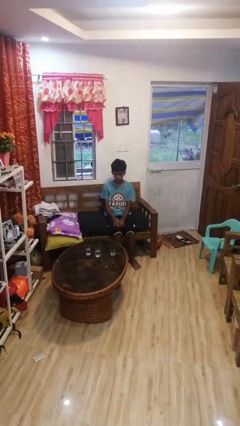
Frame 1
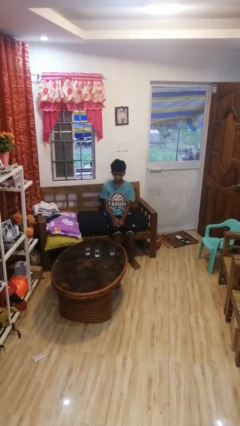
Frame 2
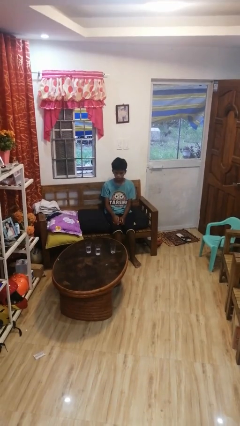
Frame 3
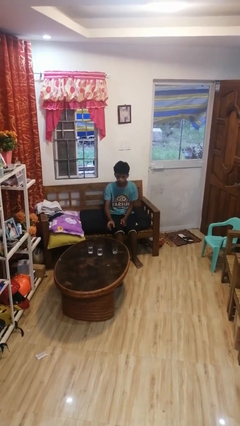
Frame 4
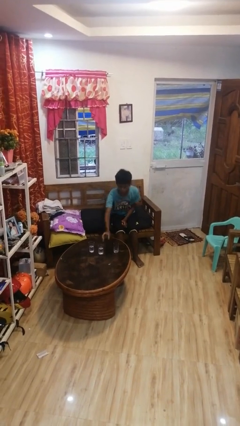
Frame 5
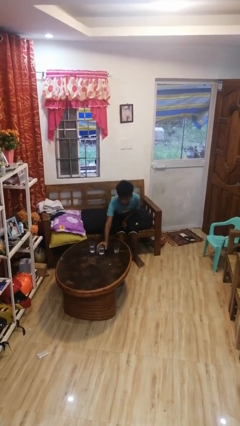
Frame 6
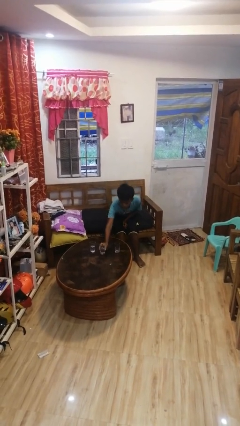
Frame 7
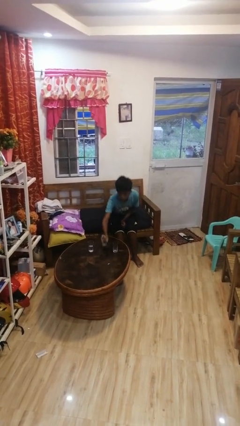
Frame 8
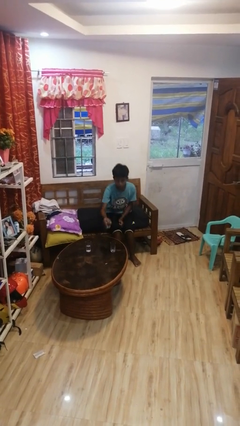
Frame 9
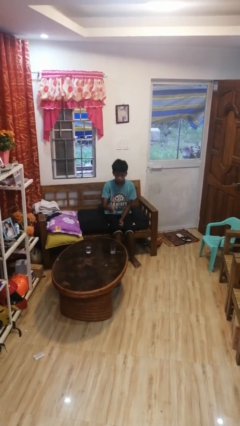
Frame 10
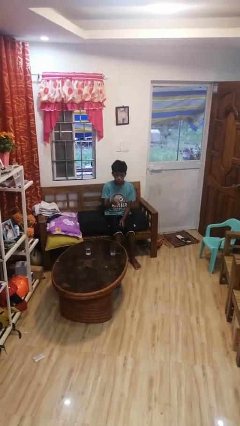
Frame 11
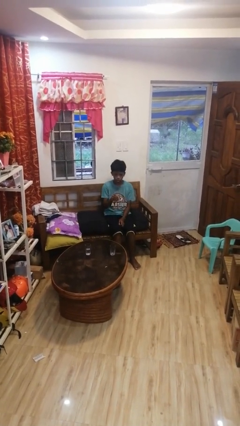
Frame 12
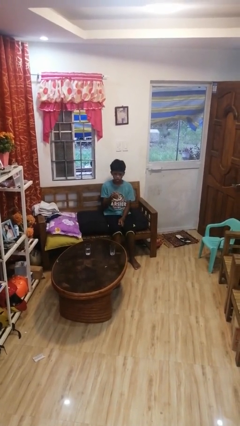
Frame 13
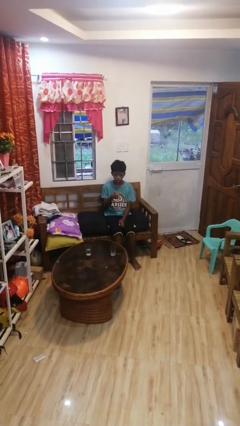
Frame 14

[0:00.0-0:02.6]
person picks up object from table

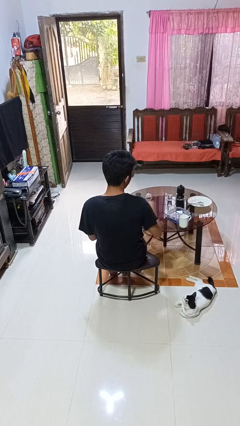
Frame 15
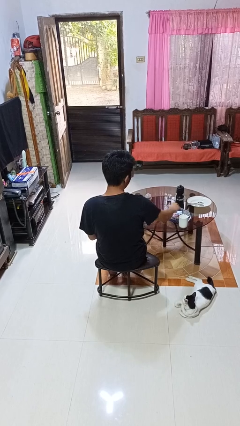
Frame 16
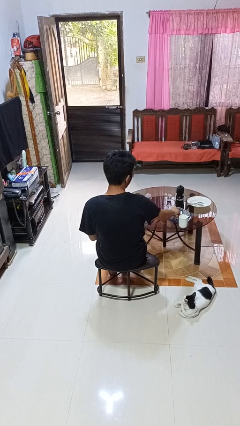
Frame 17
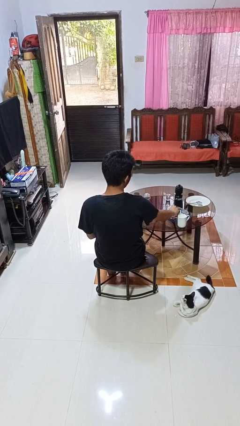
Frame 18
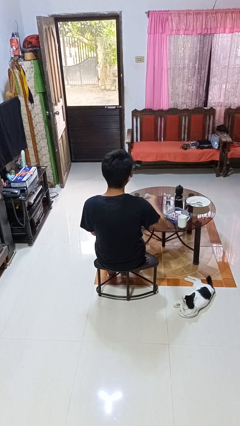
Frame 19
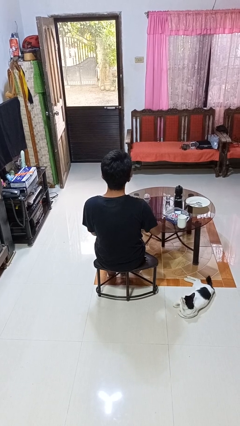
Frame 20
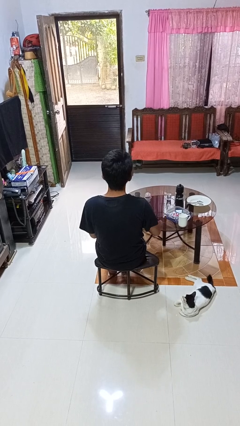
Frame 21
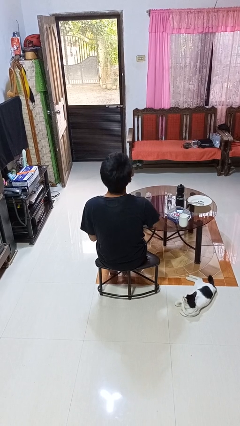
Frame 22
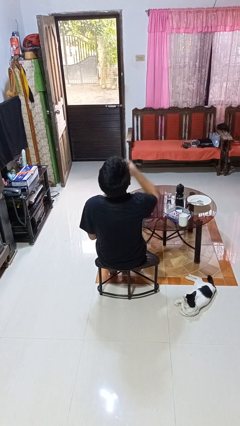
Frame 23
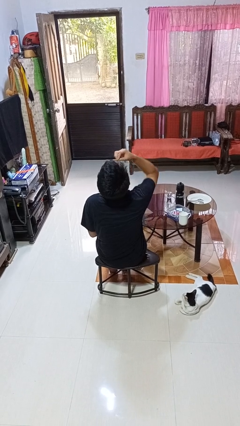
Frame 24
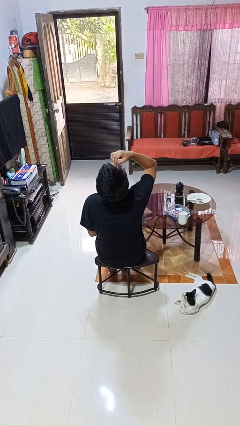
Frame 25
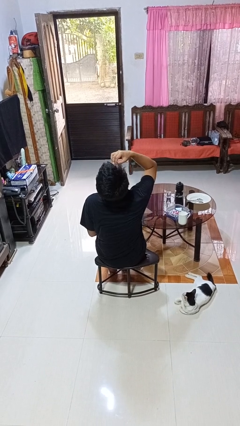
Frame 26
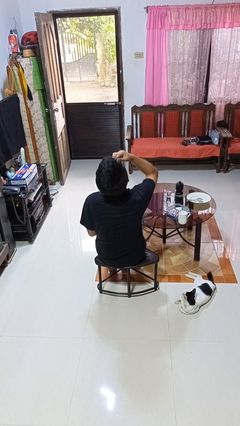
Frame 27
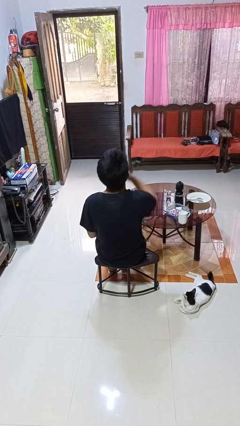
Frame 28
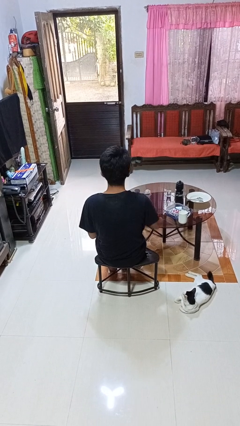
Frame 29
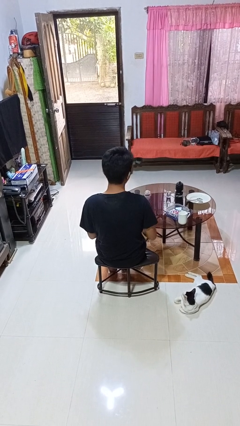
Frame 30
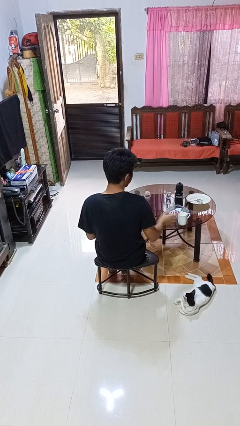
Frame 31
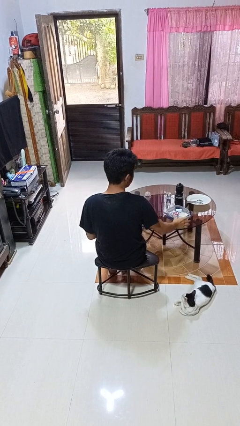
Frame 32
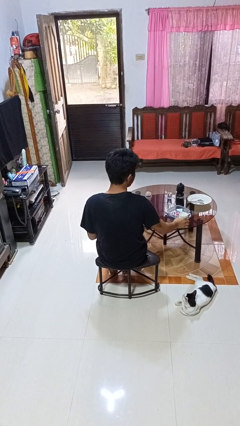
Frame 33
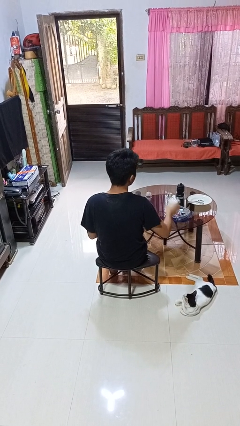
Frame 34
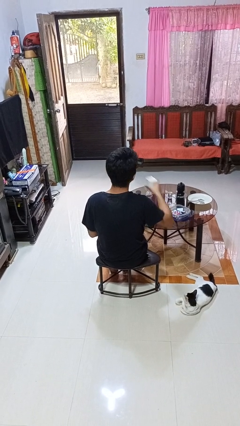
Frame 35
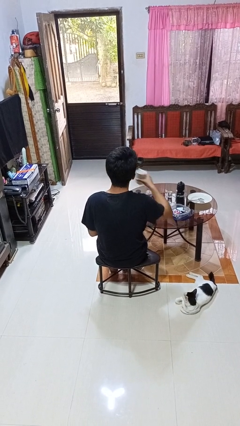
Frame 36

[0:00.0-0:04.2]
person takes medicine pills

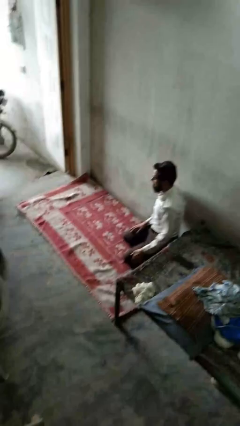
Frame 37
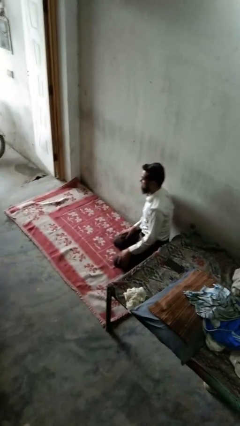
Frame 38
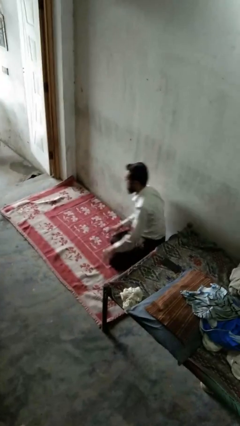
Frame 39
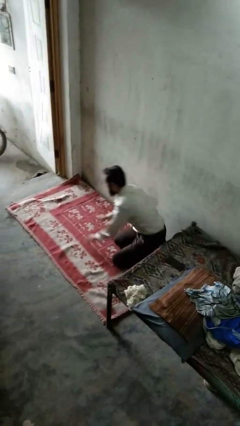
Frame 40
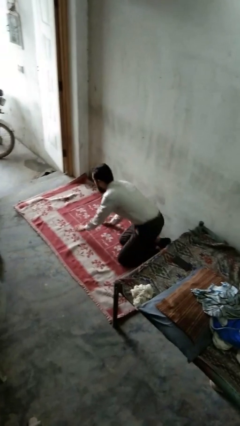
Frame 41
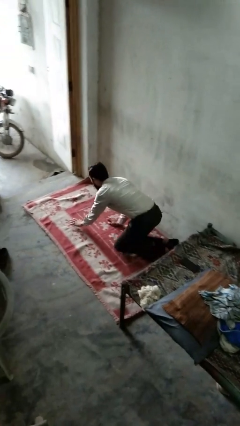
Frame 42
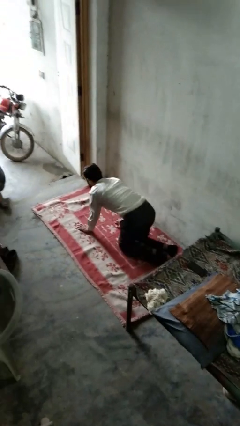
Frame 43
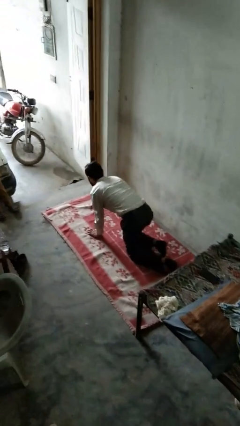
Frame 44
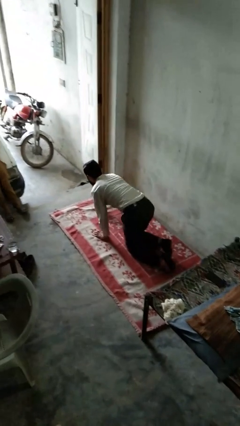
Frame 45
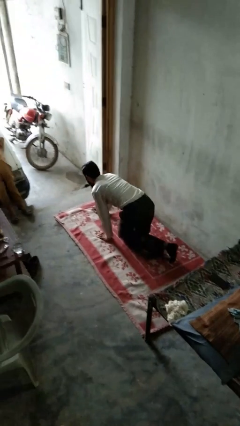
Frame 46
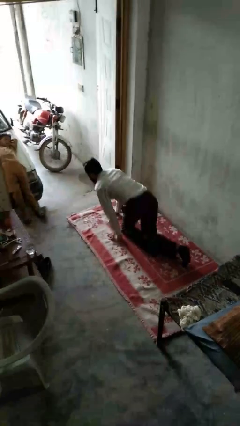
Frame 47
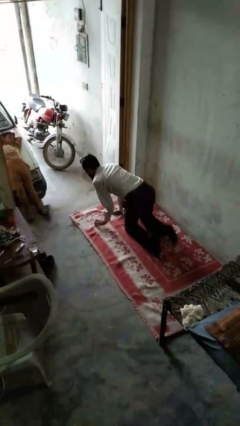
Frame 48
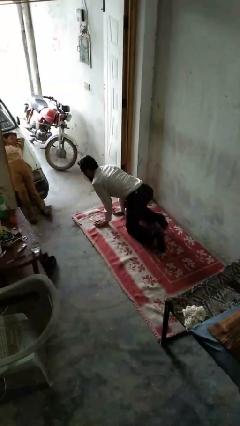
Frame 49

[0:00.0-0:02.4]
person crawls

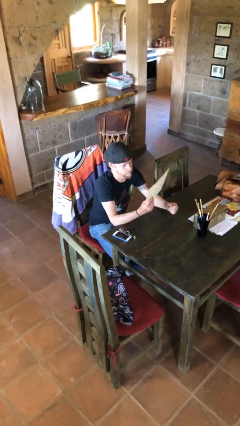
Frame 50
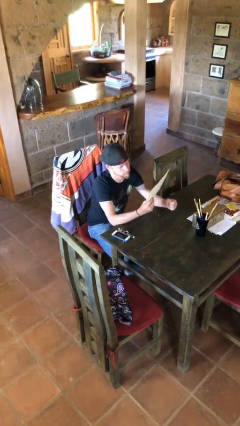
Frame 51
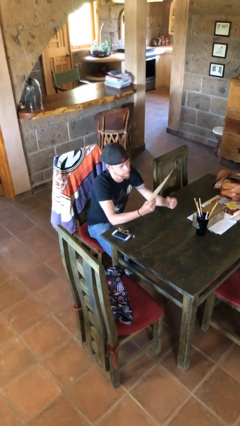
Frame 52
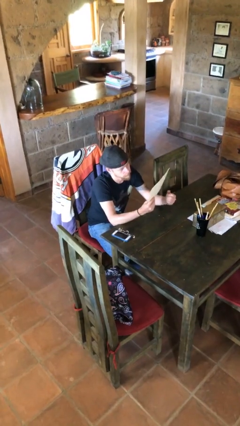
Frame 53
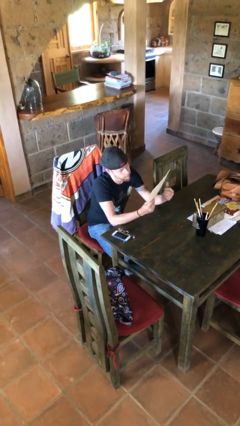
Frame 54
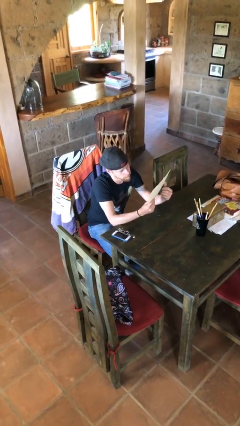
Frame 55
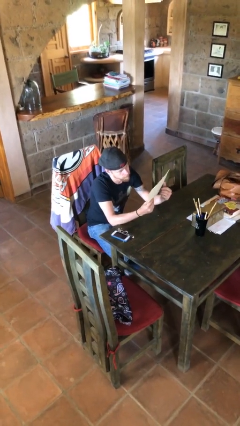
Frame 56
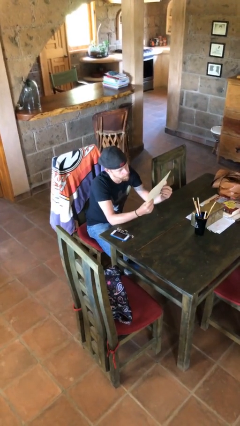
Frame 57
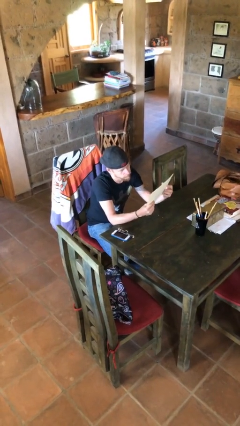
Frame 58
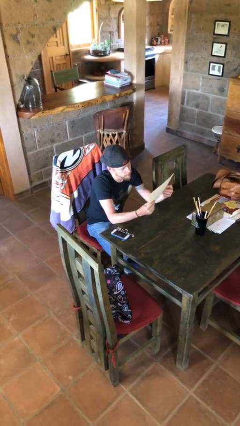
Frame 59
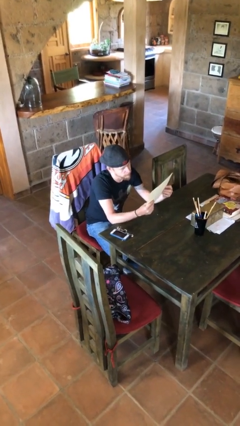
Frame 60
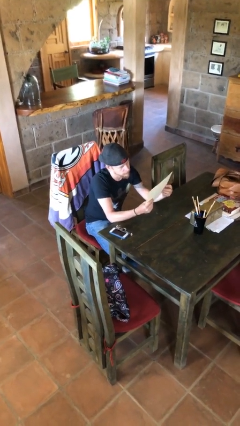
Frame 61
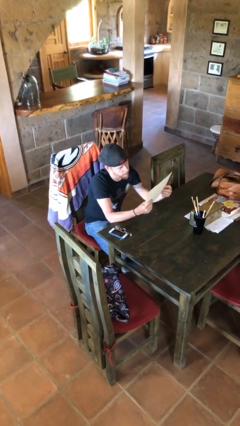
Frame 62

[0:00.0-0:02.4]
person reads document

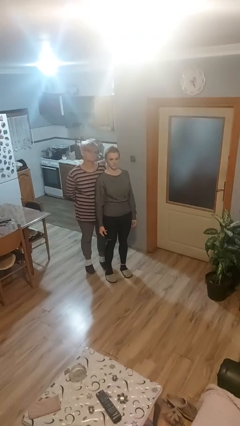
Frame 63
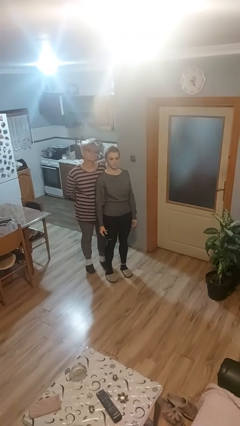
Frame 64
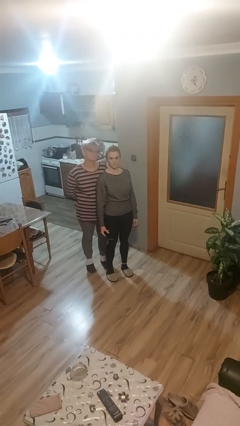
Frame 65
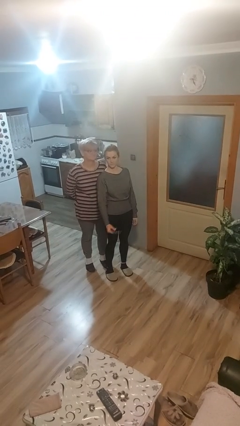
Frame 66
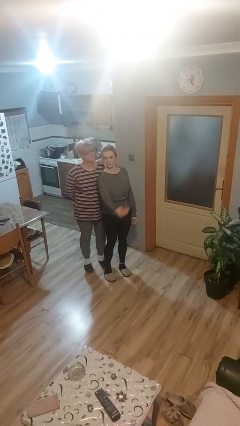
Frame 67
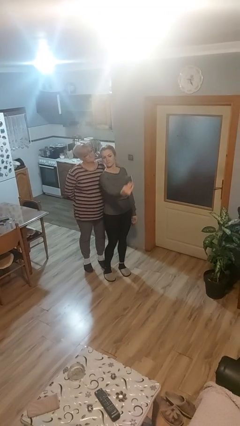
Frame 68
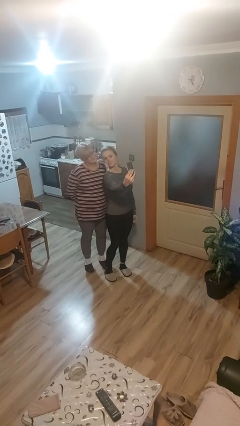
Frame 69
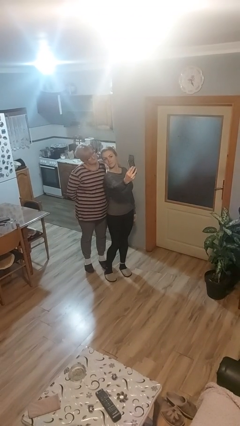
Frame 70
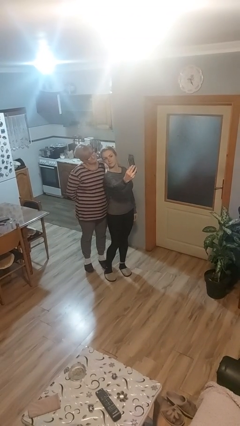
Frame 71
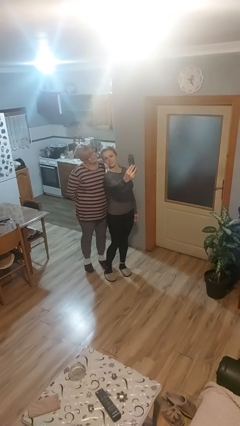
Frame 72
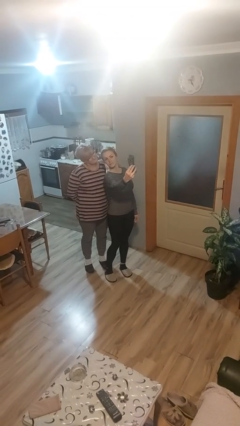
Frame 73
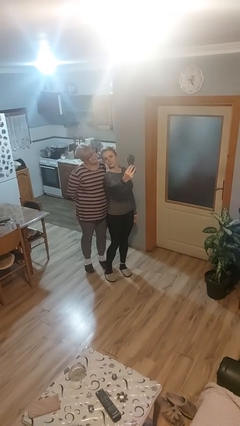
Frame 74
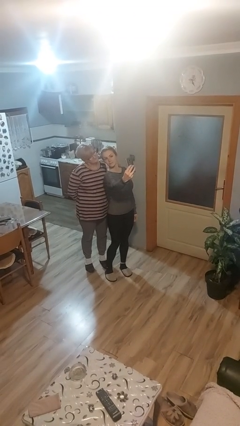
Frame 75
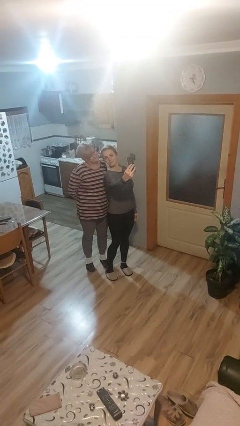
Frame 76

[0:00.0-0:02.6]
person takes selfie with person

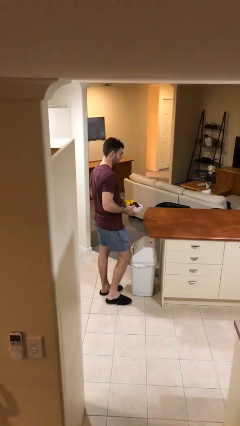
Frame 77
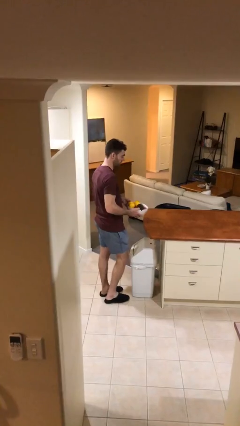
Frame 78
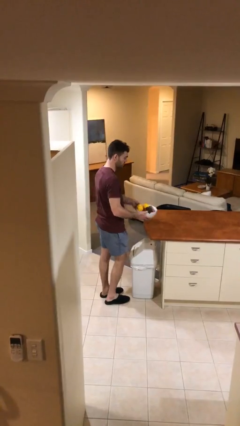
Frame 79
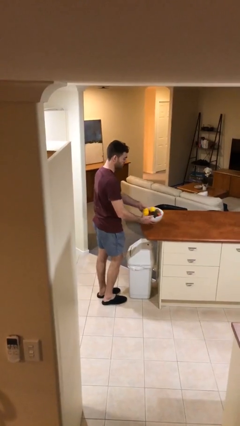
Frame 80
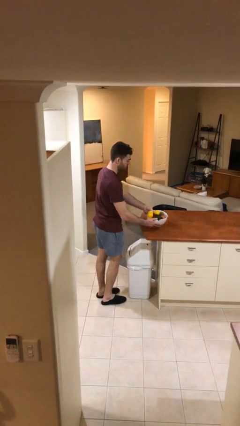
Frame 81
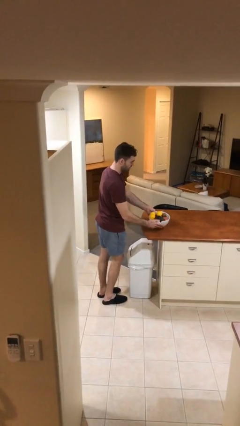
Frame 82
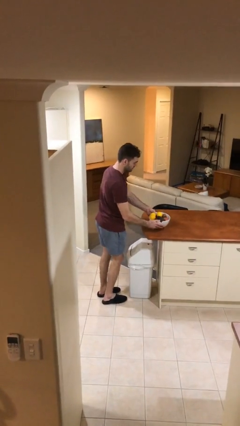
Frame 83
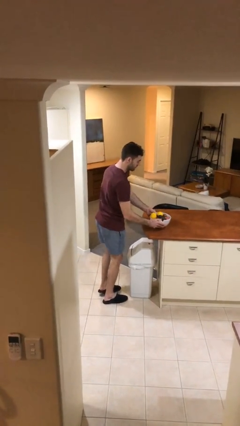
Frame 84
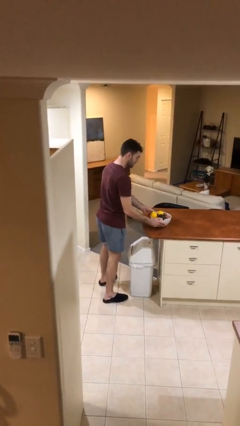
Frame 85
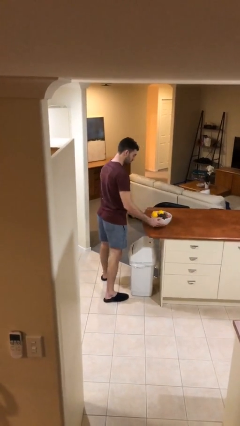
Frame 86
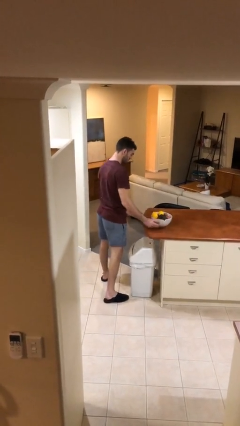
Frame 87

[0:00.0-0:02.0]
person puts down object on table

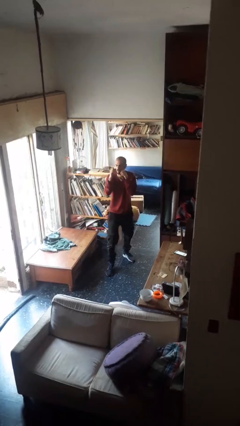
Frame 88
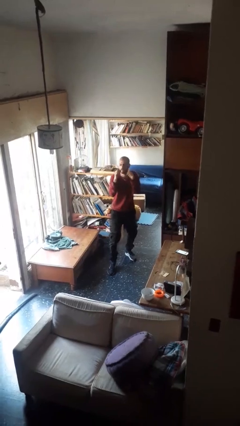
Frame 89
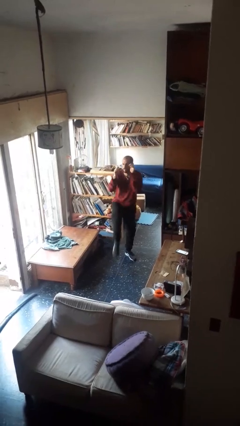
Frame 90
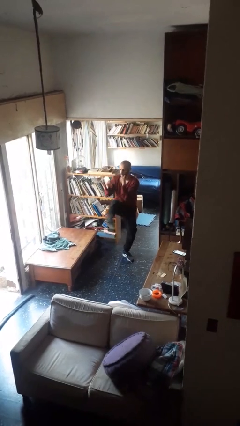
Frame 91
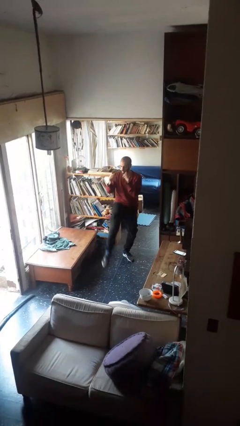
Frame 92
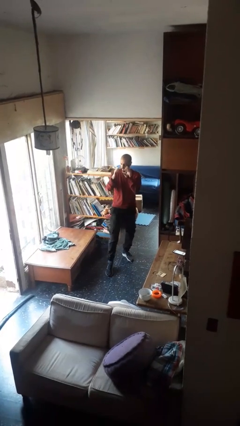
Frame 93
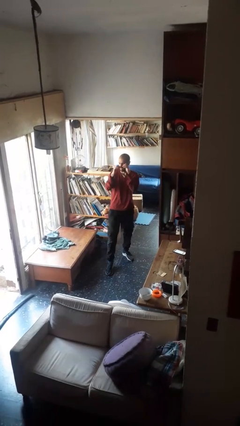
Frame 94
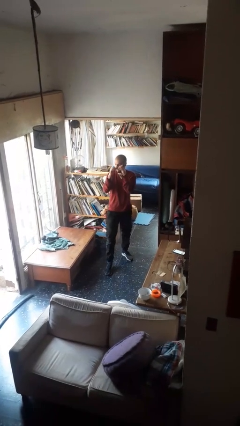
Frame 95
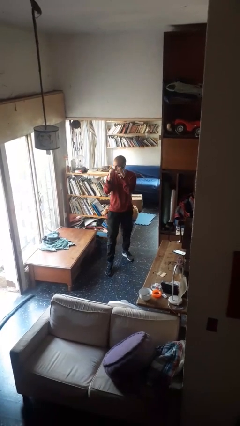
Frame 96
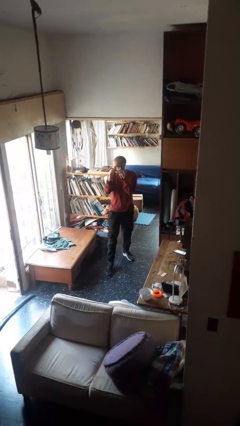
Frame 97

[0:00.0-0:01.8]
person karate kicks
